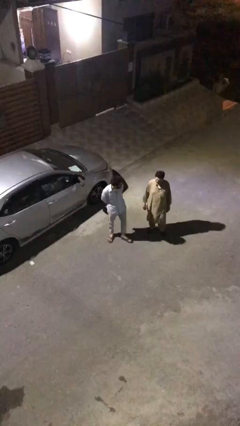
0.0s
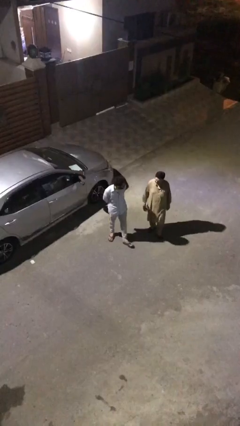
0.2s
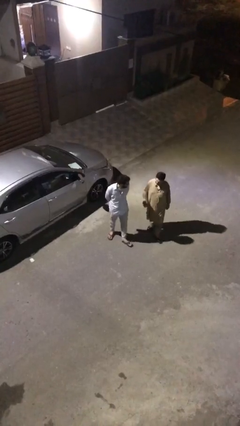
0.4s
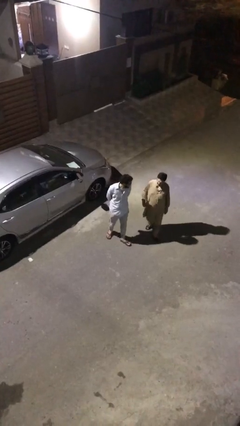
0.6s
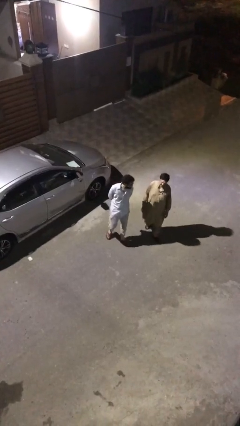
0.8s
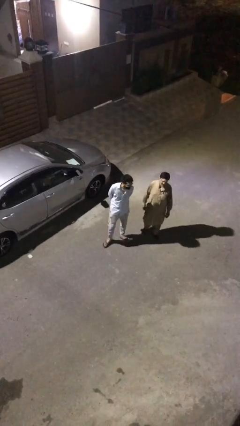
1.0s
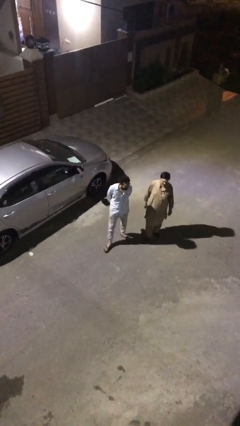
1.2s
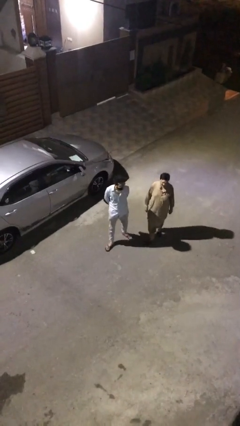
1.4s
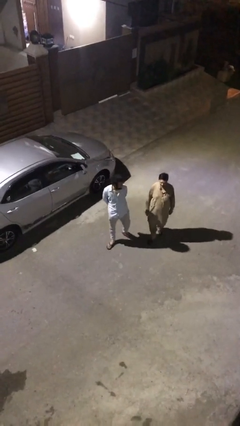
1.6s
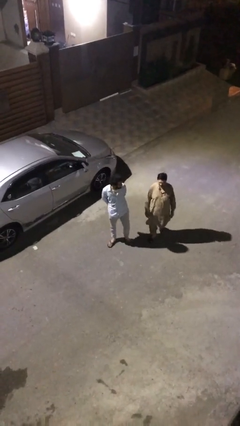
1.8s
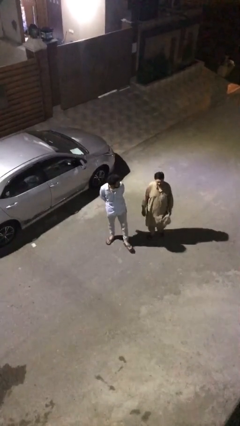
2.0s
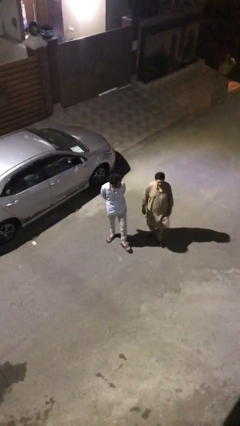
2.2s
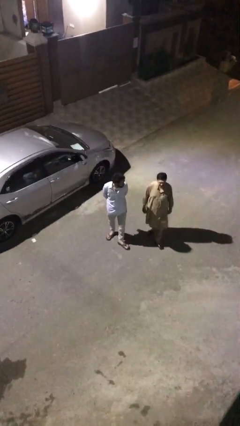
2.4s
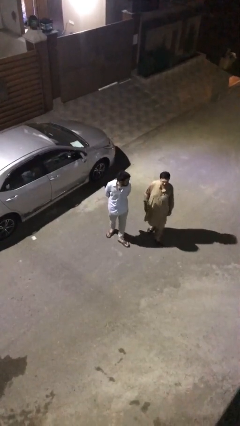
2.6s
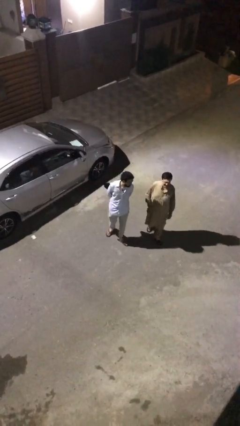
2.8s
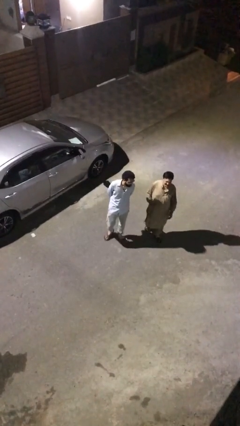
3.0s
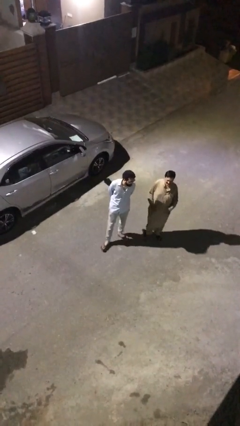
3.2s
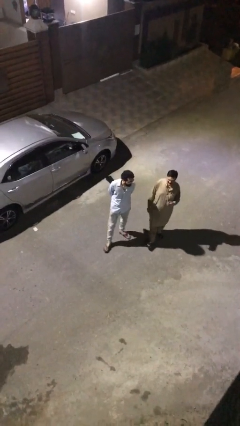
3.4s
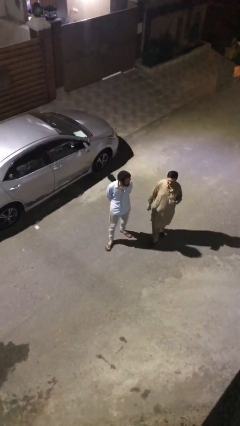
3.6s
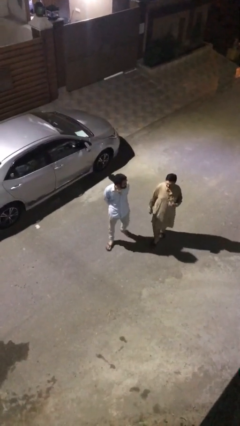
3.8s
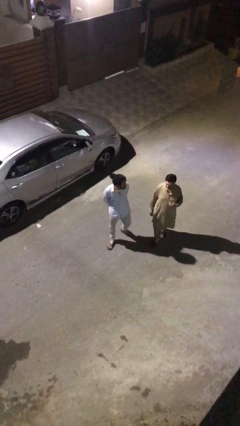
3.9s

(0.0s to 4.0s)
person talks to person

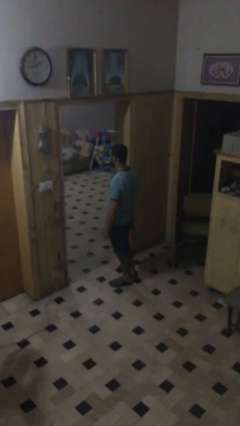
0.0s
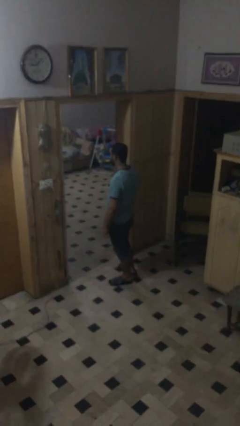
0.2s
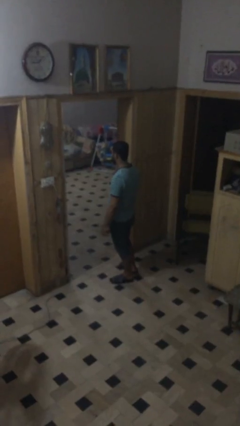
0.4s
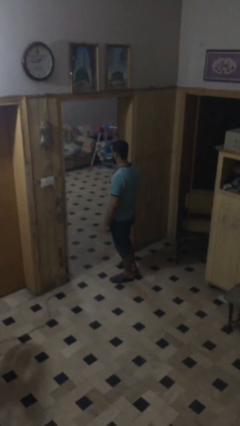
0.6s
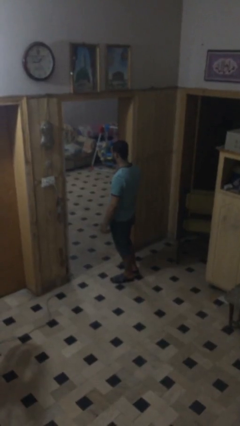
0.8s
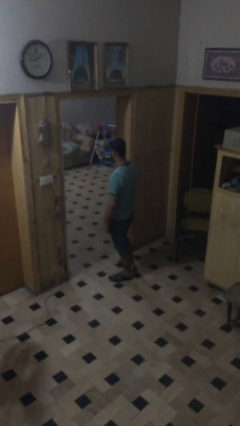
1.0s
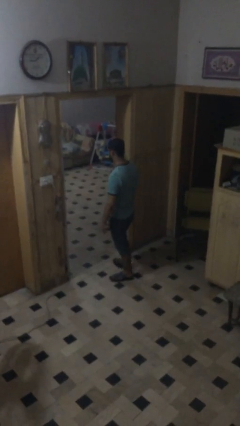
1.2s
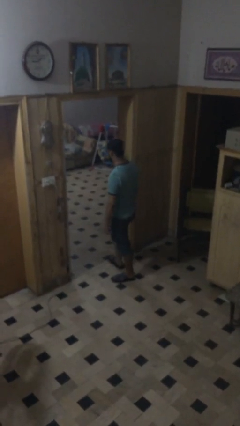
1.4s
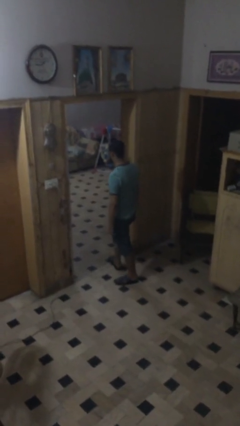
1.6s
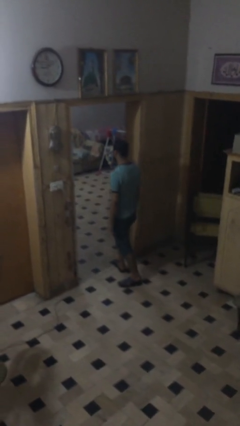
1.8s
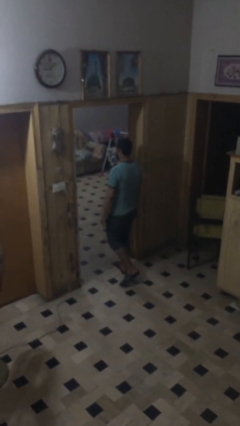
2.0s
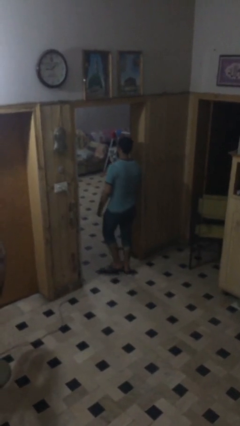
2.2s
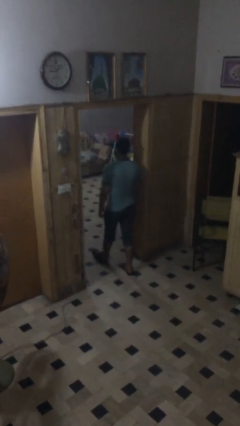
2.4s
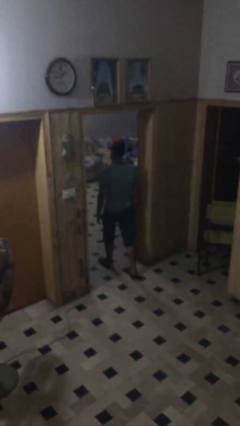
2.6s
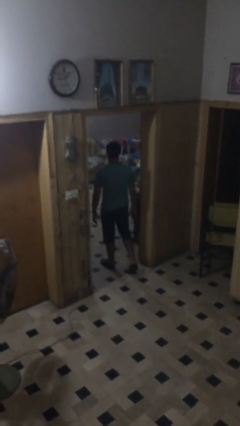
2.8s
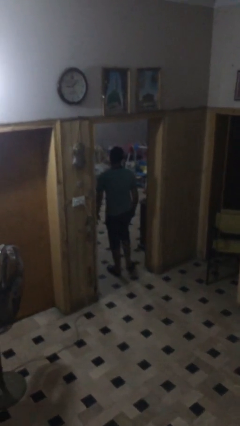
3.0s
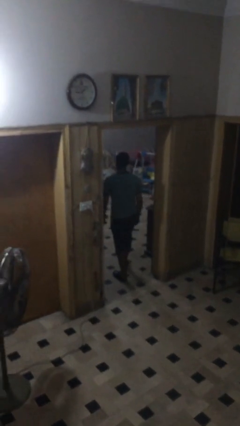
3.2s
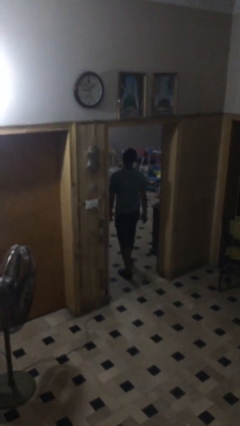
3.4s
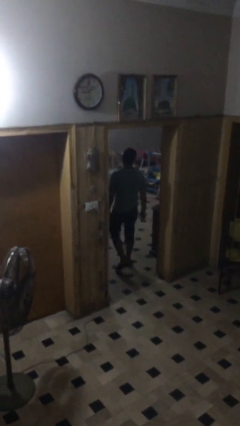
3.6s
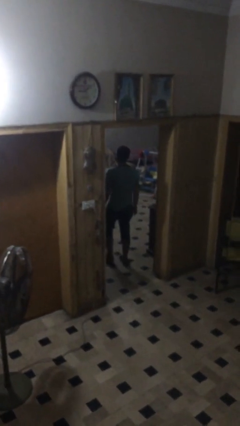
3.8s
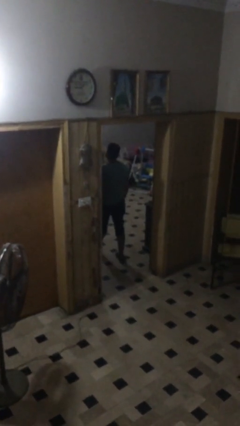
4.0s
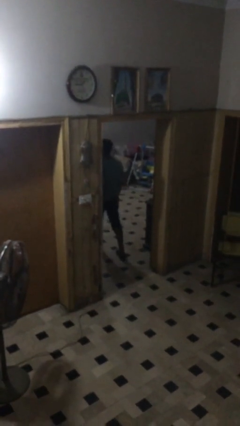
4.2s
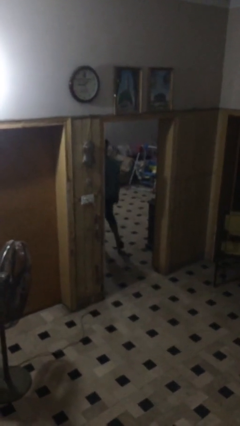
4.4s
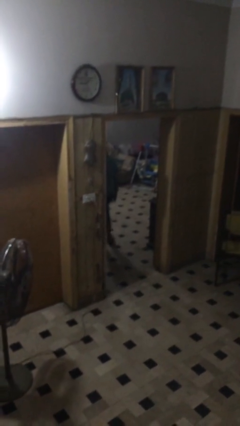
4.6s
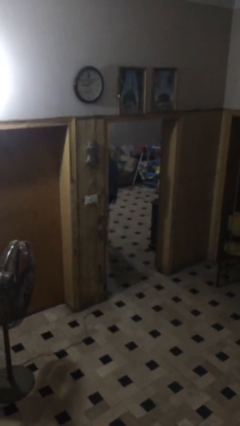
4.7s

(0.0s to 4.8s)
person exits scene through structure

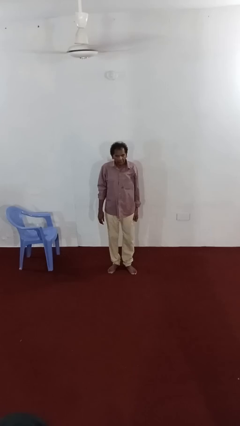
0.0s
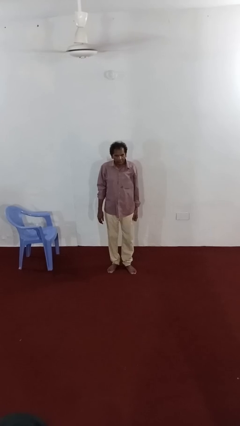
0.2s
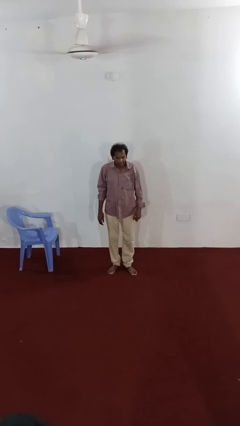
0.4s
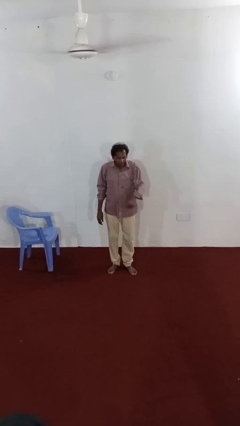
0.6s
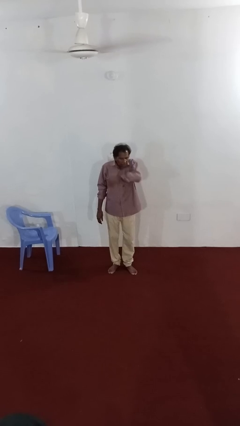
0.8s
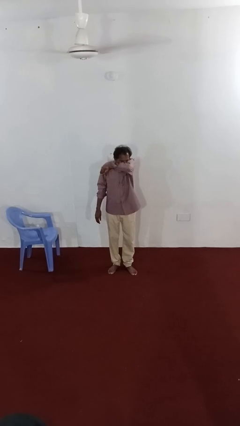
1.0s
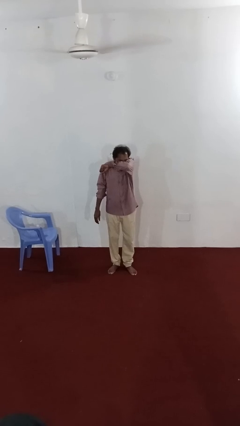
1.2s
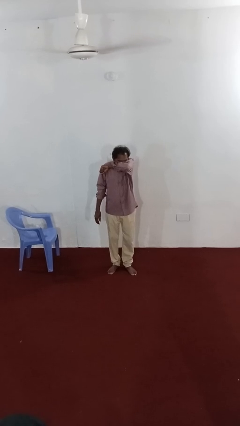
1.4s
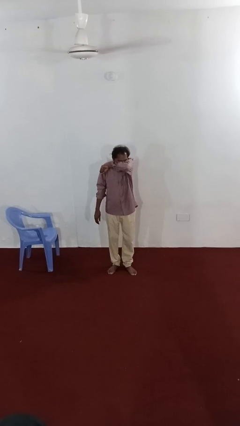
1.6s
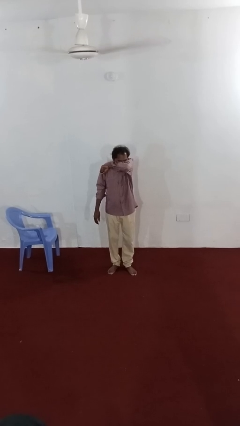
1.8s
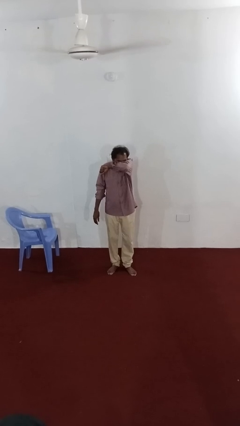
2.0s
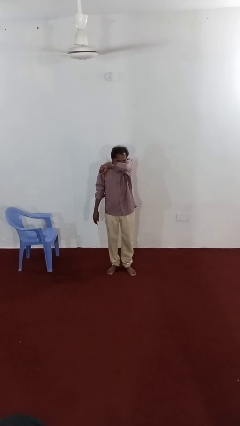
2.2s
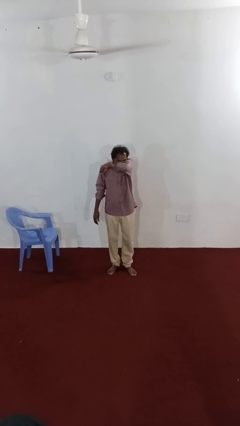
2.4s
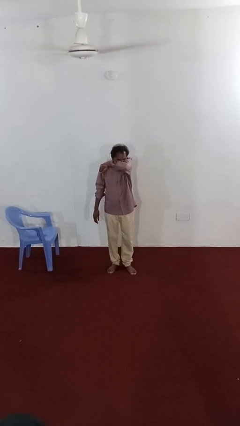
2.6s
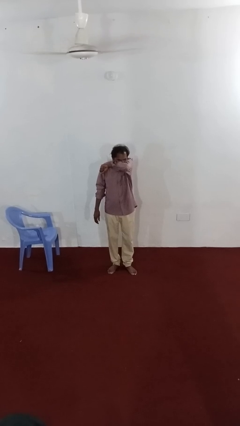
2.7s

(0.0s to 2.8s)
person sneezes into arm

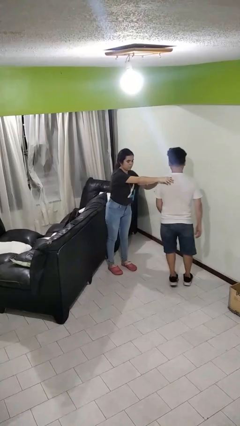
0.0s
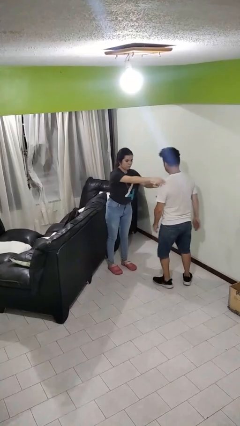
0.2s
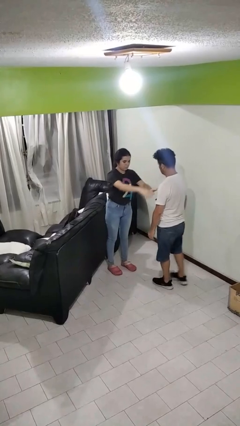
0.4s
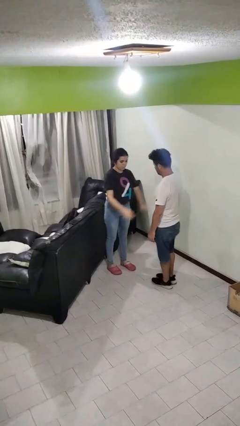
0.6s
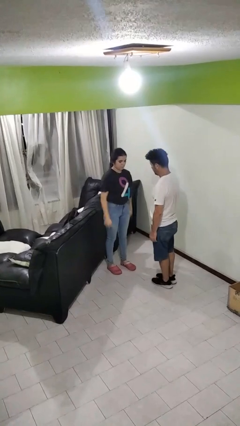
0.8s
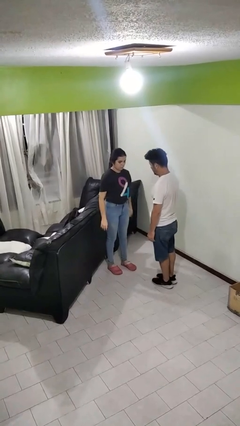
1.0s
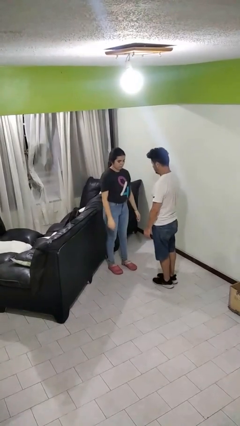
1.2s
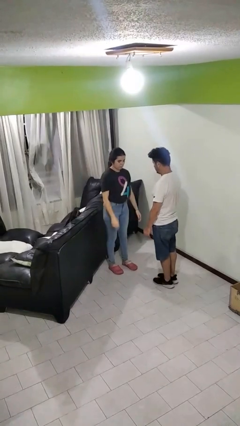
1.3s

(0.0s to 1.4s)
person spins person around

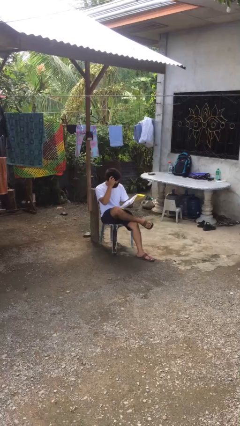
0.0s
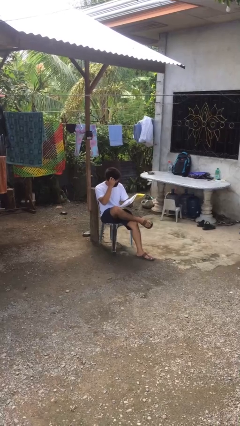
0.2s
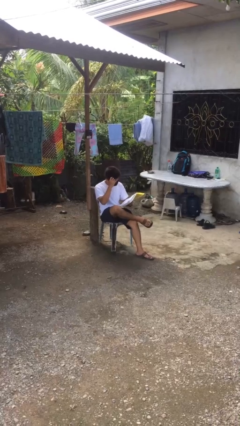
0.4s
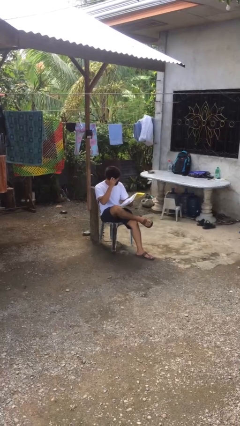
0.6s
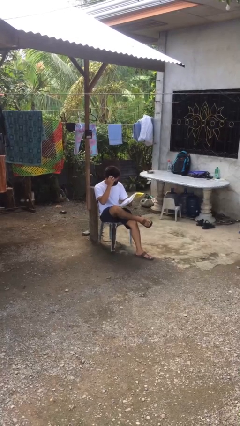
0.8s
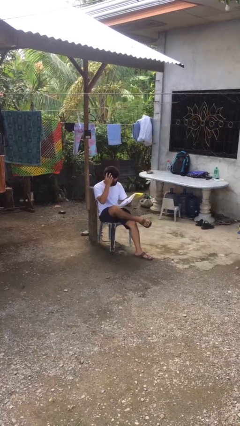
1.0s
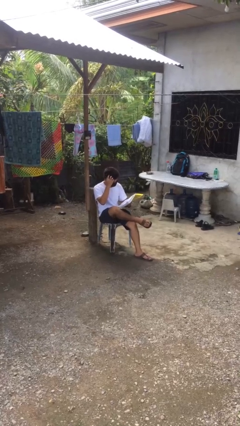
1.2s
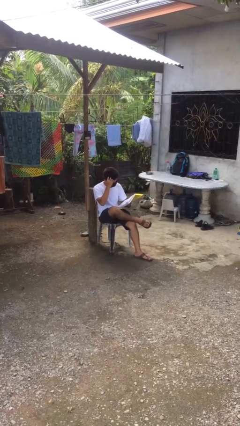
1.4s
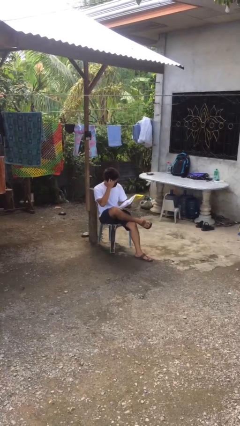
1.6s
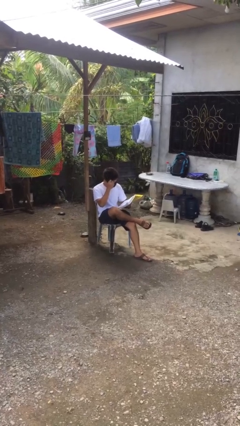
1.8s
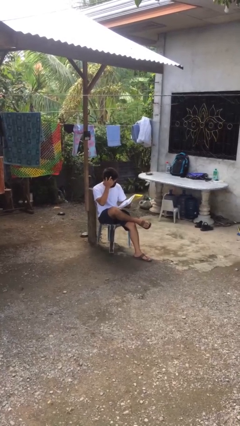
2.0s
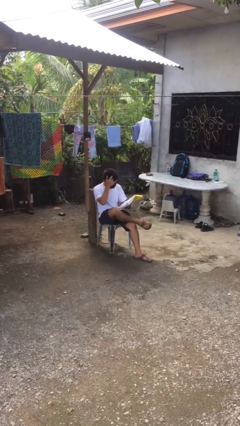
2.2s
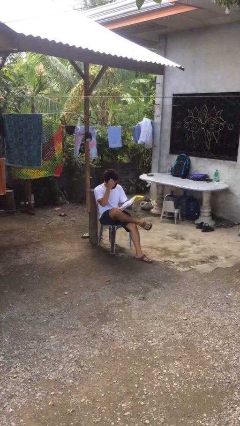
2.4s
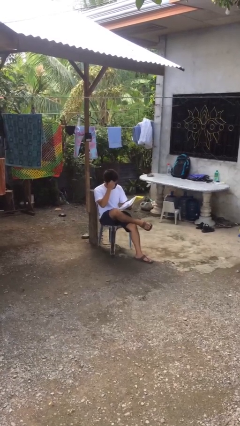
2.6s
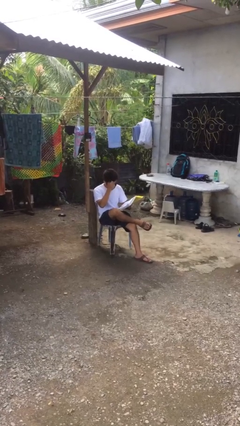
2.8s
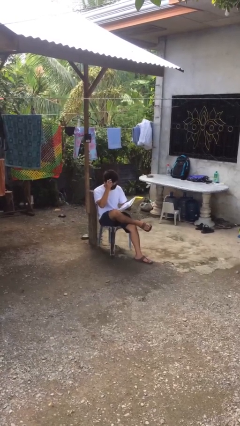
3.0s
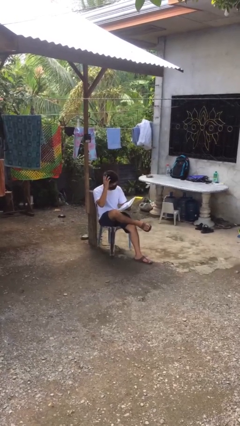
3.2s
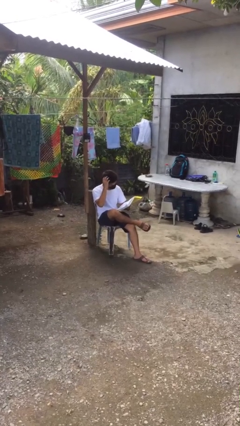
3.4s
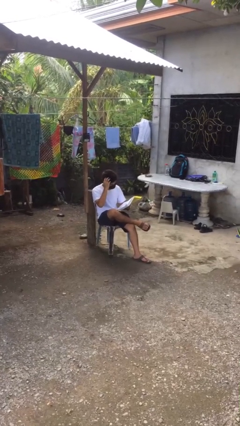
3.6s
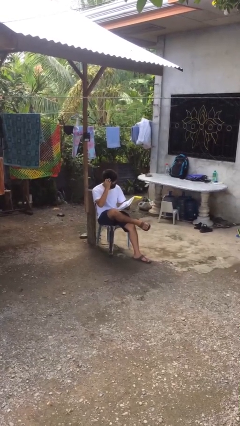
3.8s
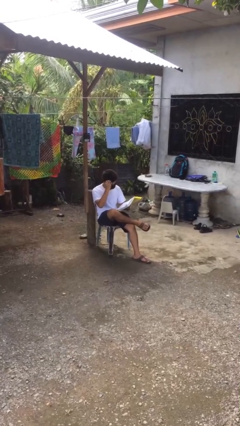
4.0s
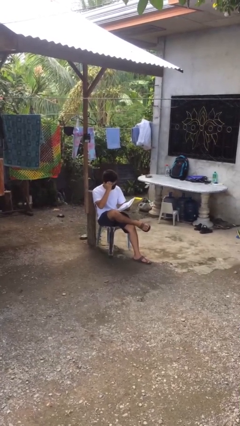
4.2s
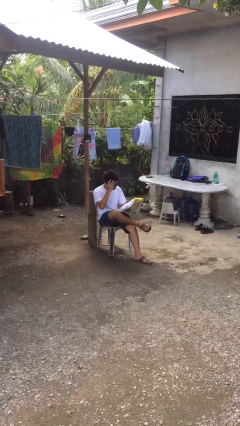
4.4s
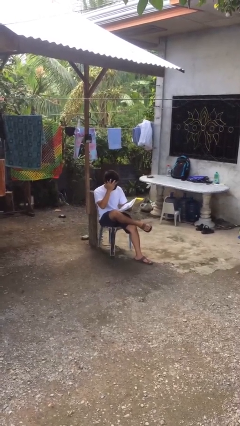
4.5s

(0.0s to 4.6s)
person reads document

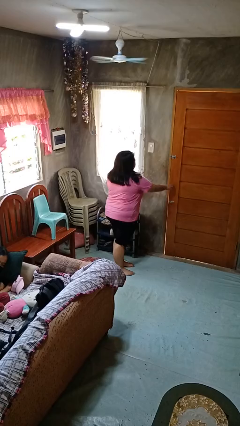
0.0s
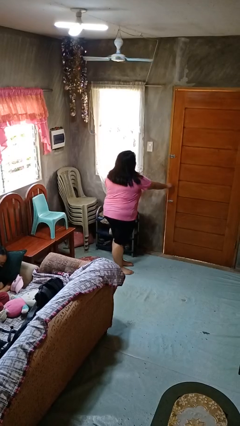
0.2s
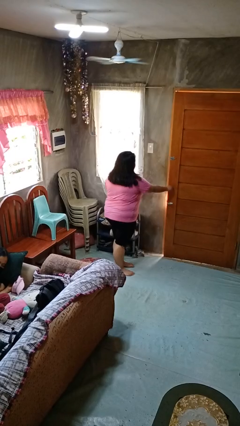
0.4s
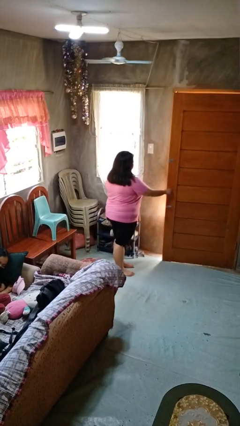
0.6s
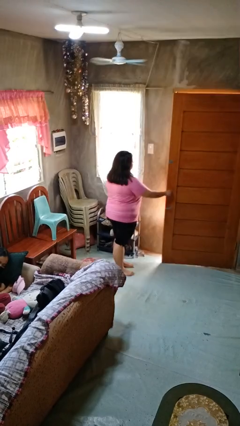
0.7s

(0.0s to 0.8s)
person opens facility door
